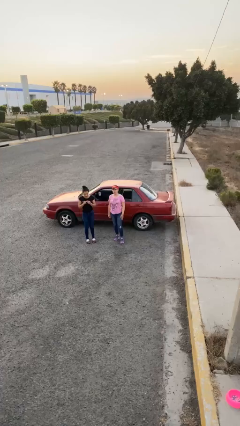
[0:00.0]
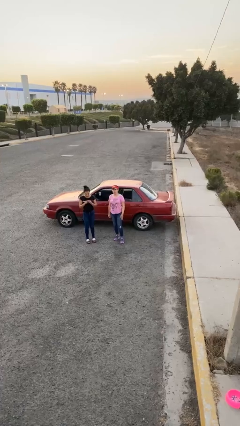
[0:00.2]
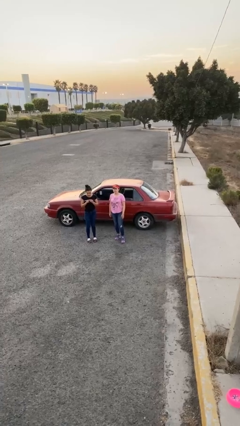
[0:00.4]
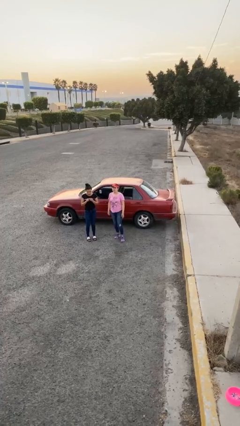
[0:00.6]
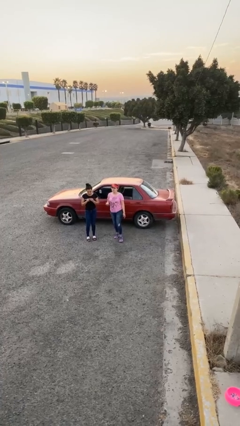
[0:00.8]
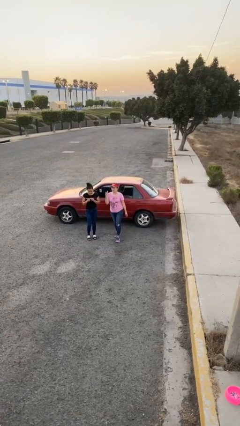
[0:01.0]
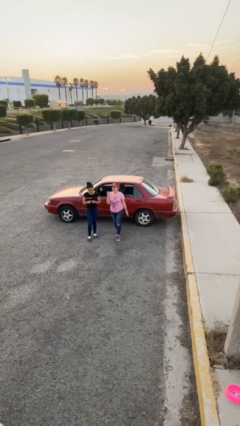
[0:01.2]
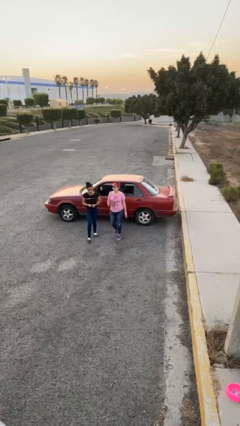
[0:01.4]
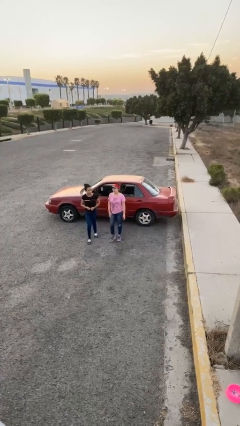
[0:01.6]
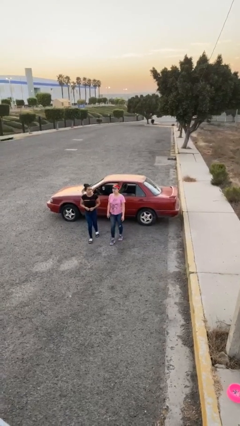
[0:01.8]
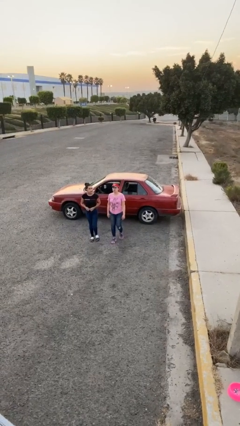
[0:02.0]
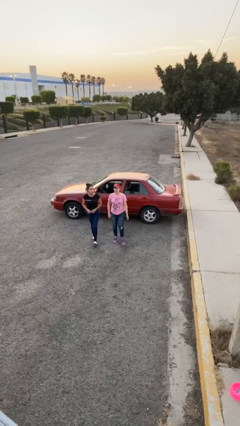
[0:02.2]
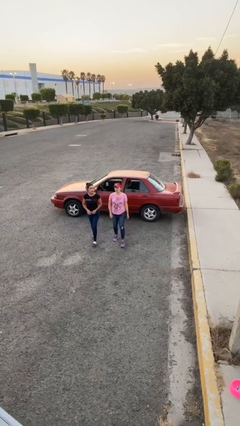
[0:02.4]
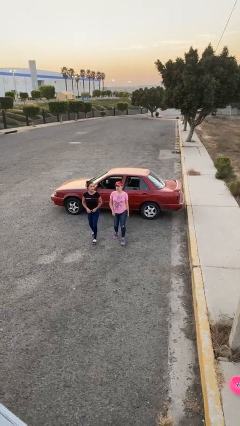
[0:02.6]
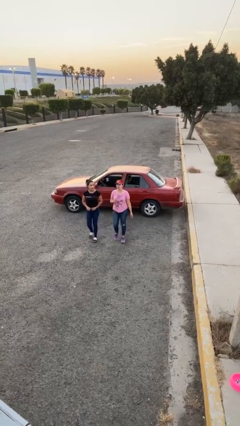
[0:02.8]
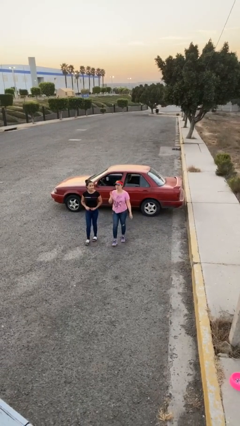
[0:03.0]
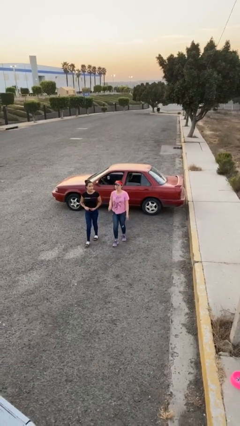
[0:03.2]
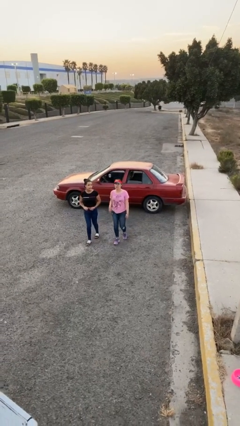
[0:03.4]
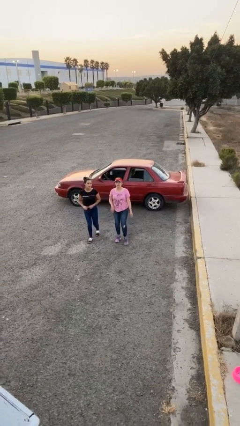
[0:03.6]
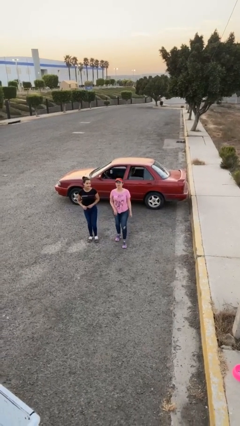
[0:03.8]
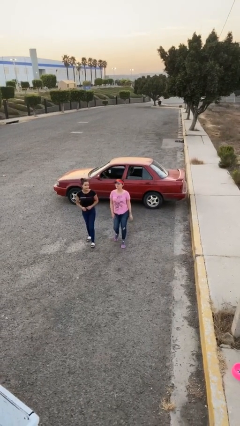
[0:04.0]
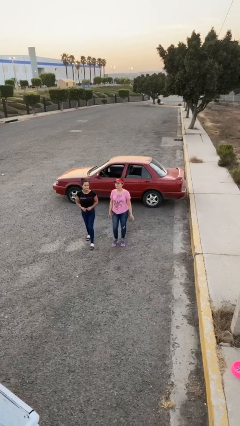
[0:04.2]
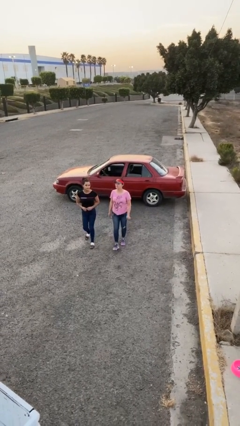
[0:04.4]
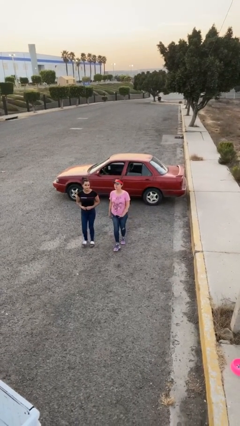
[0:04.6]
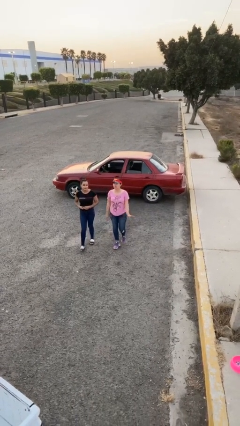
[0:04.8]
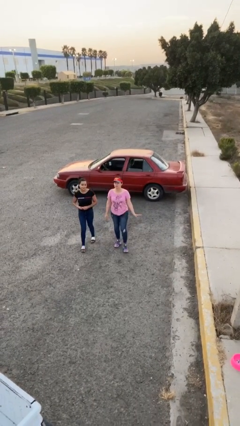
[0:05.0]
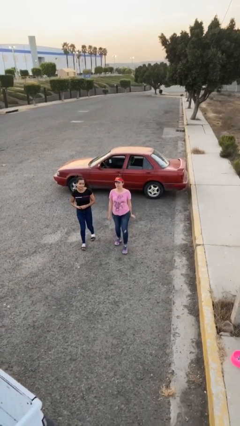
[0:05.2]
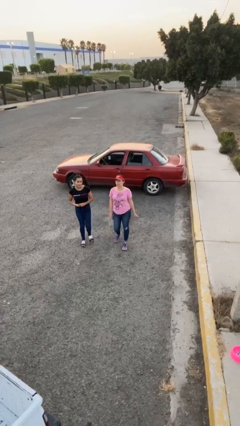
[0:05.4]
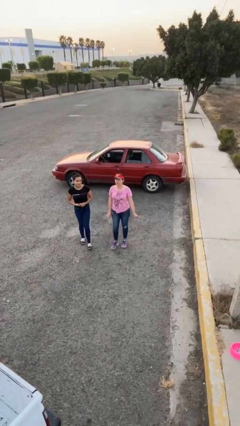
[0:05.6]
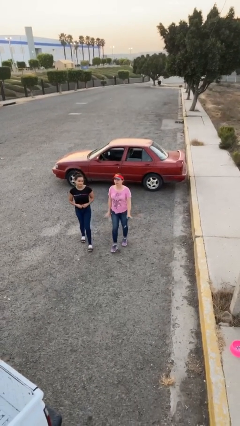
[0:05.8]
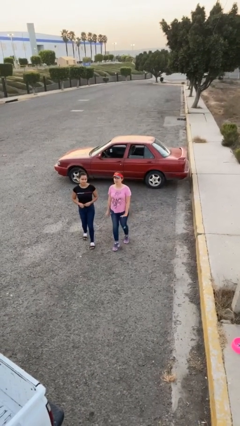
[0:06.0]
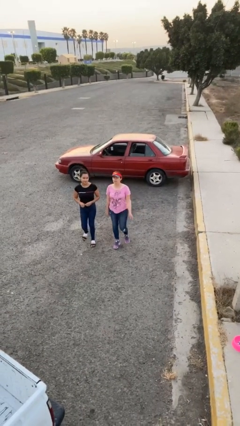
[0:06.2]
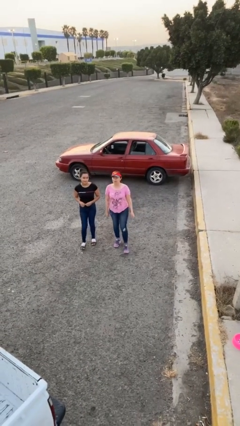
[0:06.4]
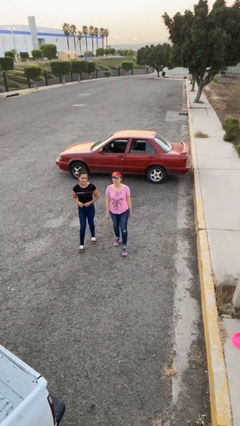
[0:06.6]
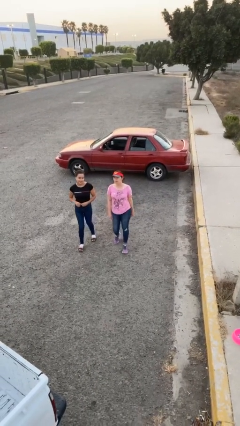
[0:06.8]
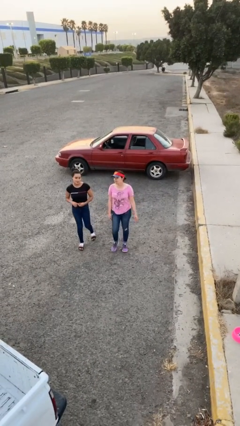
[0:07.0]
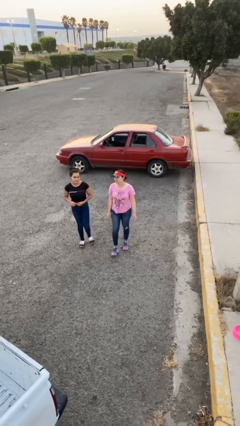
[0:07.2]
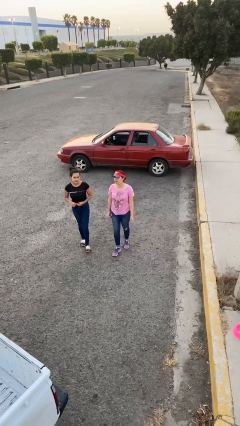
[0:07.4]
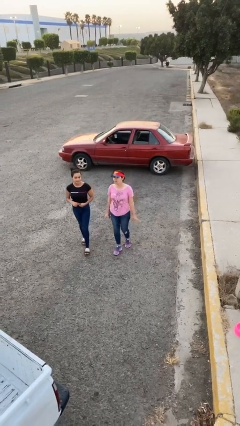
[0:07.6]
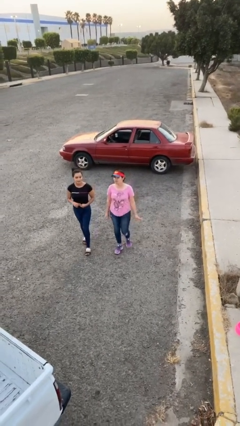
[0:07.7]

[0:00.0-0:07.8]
person talks to person

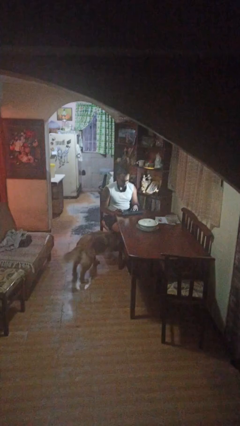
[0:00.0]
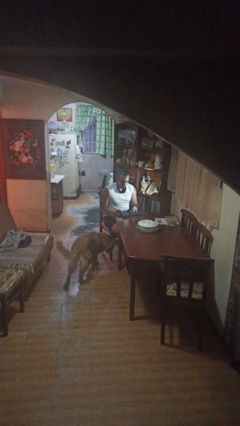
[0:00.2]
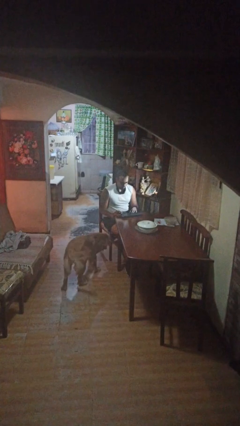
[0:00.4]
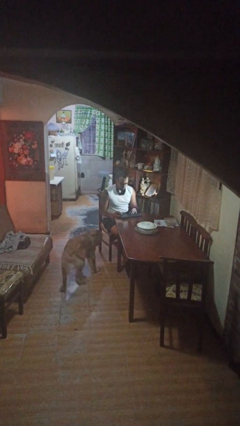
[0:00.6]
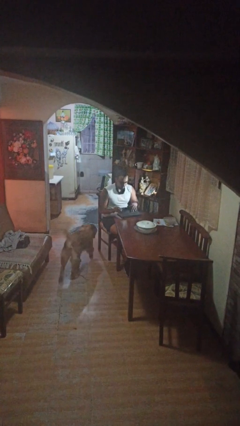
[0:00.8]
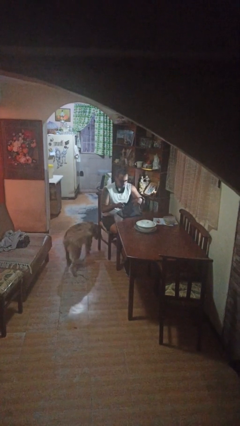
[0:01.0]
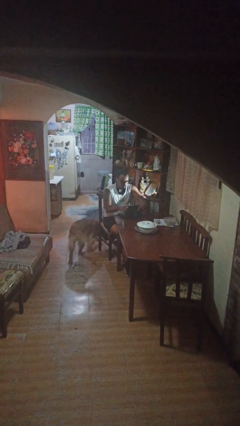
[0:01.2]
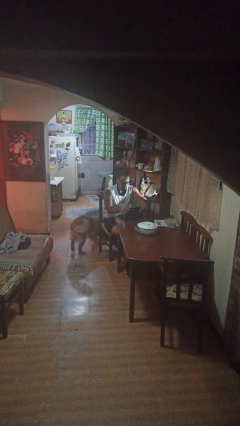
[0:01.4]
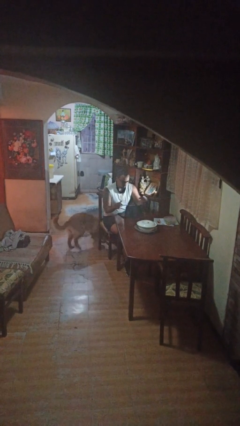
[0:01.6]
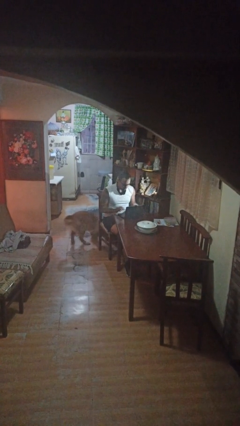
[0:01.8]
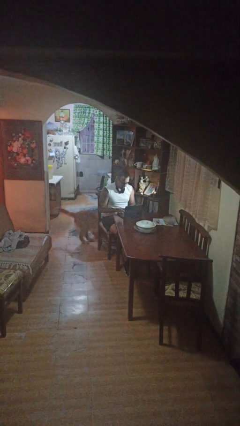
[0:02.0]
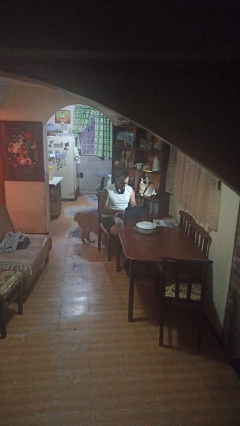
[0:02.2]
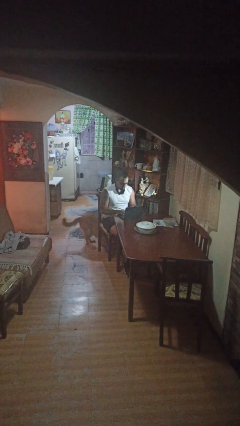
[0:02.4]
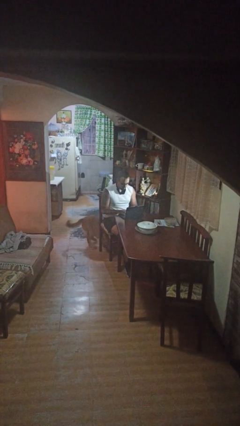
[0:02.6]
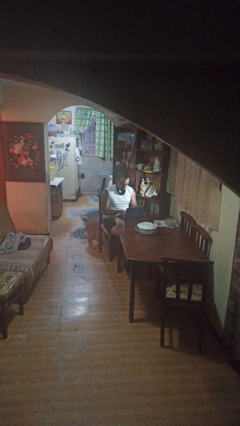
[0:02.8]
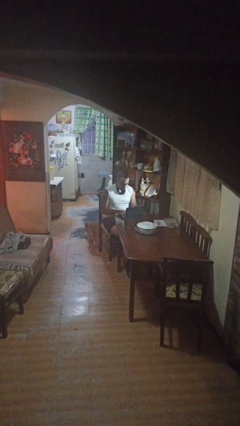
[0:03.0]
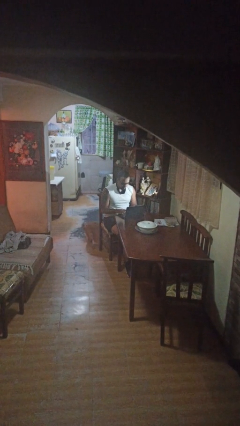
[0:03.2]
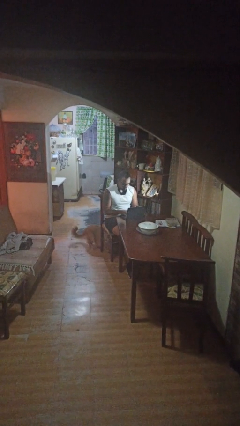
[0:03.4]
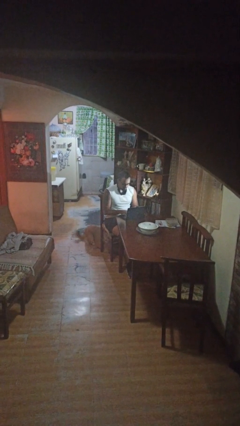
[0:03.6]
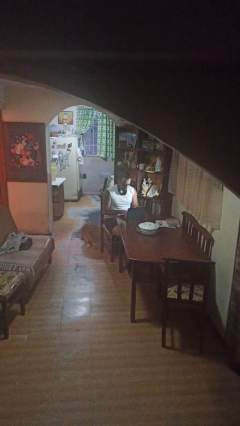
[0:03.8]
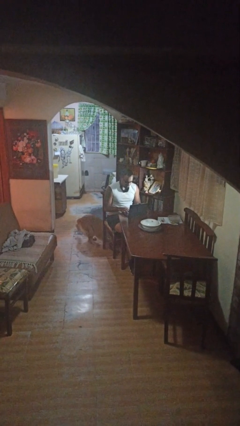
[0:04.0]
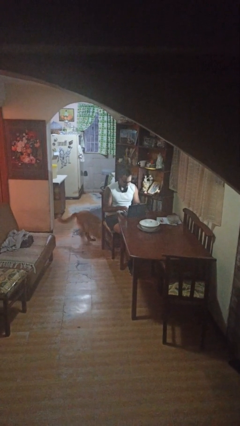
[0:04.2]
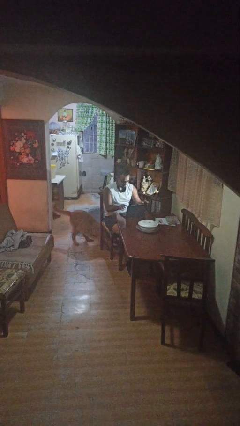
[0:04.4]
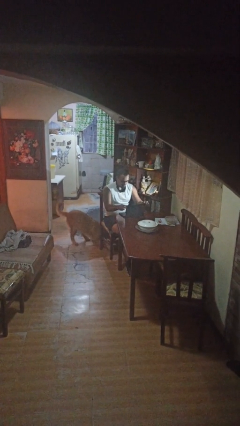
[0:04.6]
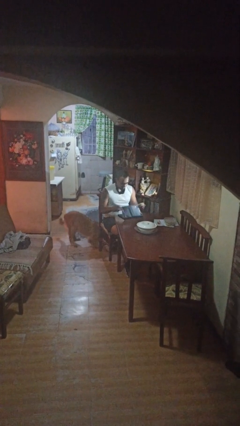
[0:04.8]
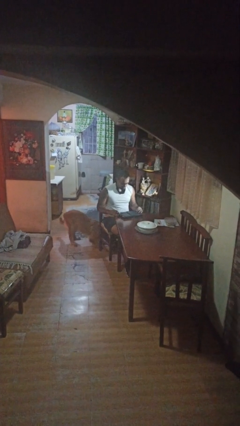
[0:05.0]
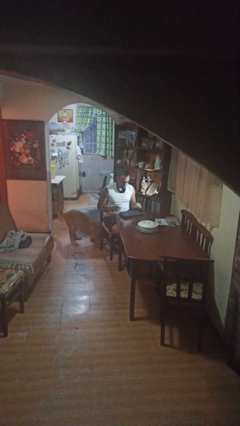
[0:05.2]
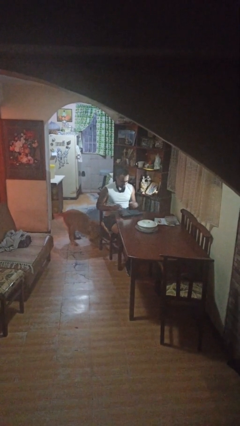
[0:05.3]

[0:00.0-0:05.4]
person interacts with laptop

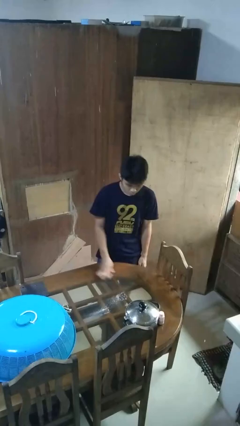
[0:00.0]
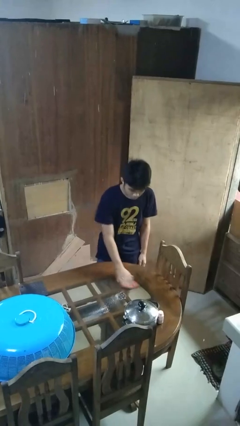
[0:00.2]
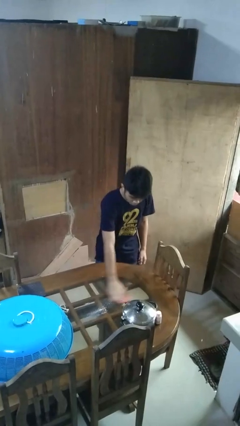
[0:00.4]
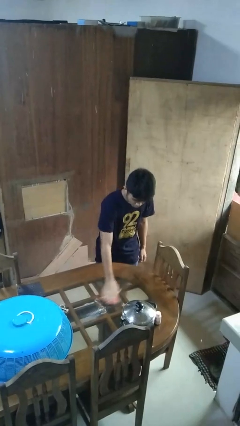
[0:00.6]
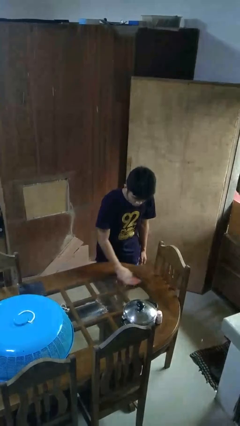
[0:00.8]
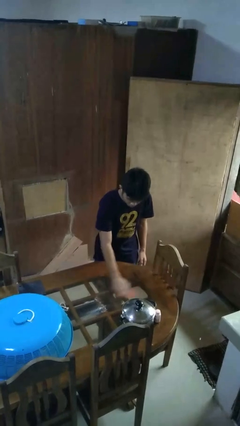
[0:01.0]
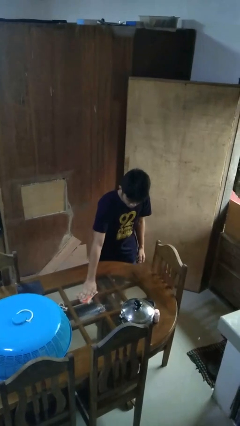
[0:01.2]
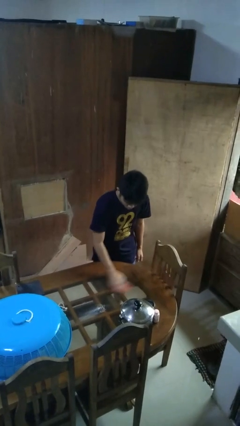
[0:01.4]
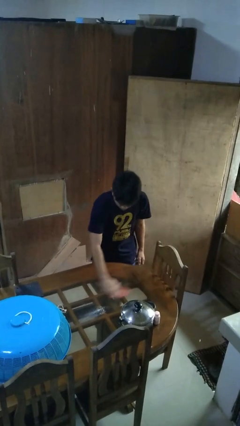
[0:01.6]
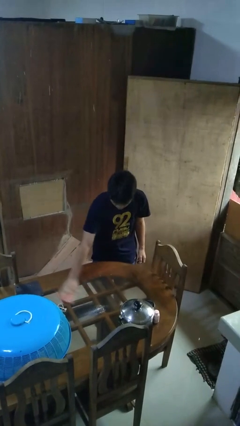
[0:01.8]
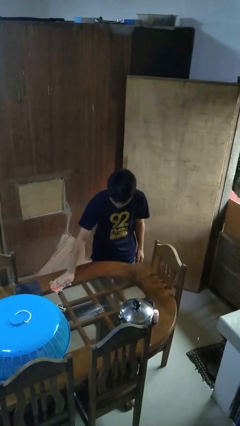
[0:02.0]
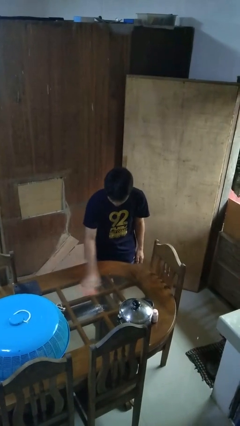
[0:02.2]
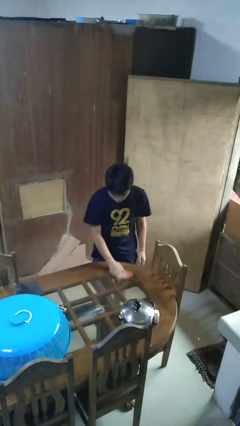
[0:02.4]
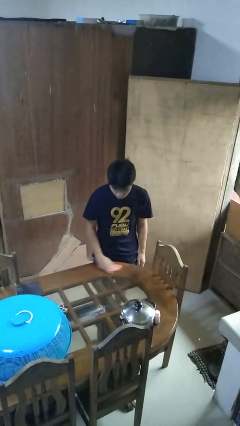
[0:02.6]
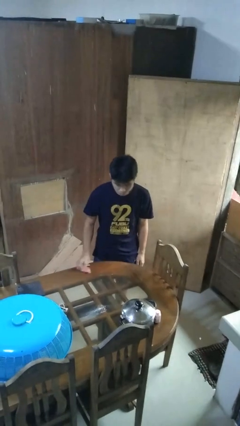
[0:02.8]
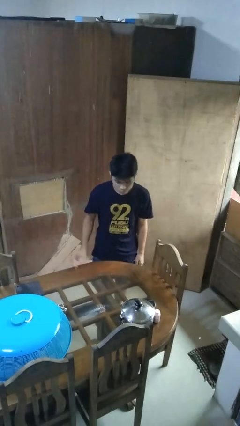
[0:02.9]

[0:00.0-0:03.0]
person cleans table with rag

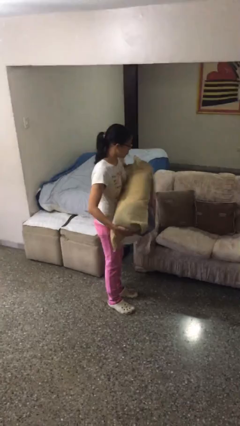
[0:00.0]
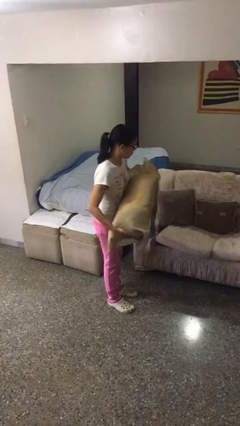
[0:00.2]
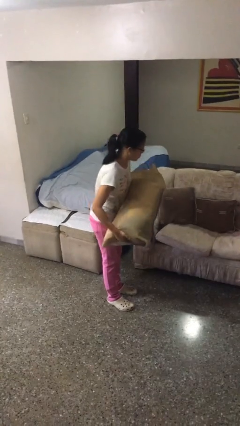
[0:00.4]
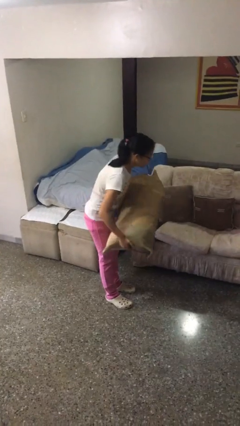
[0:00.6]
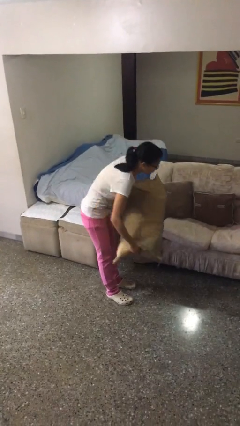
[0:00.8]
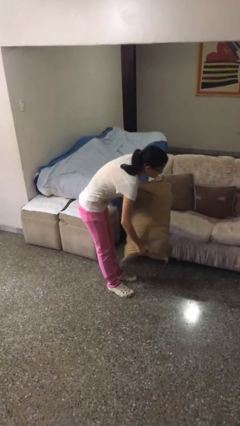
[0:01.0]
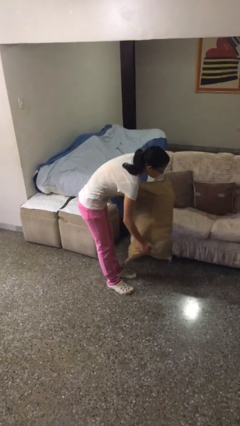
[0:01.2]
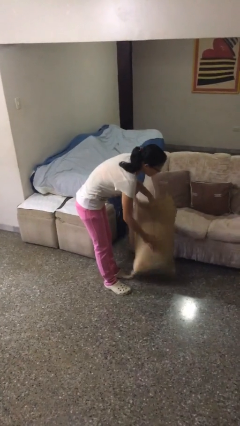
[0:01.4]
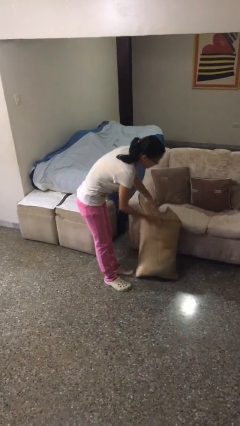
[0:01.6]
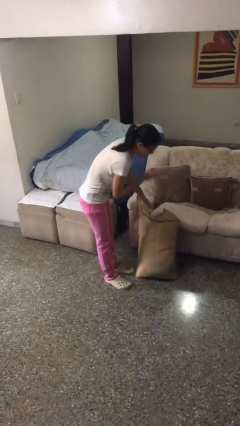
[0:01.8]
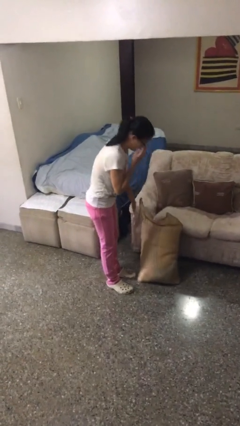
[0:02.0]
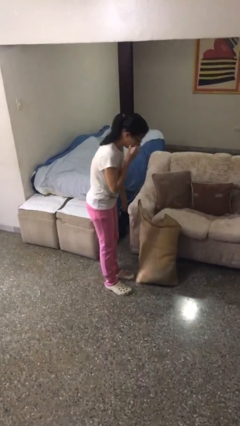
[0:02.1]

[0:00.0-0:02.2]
person puts down object on floor
